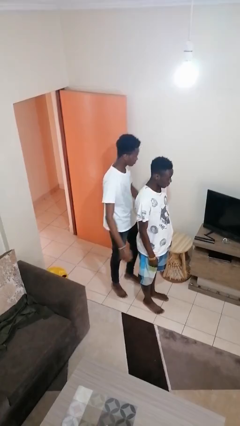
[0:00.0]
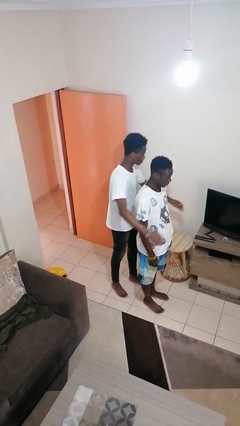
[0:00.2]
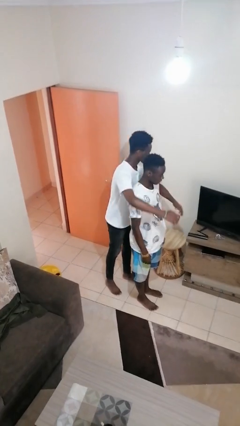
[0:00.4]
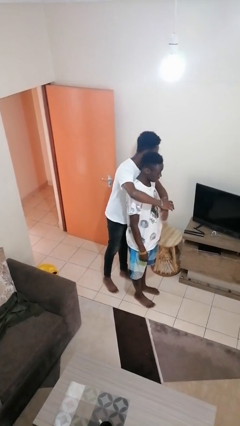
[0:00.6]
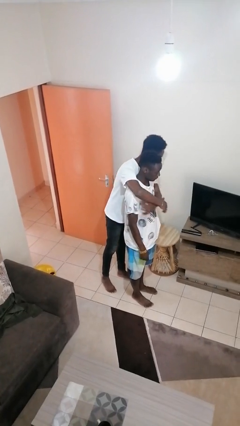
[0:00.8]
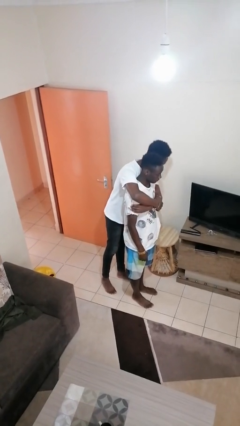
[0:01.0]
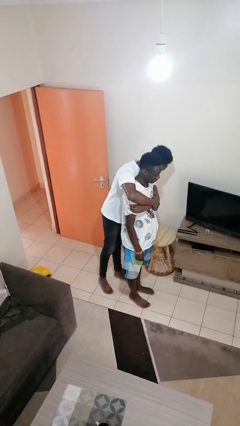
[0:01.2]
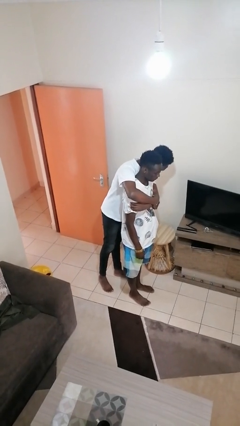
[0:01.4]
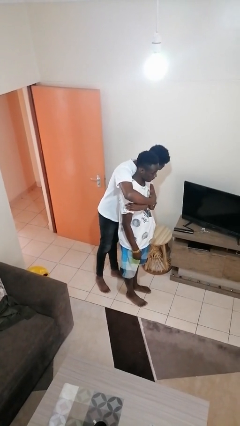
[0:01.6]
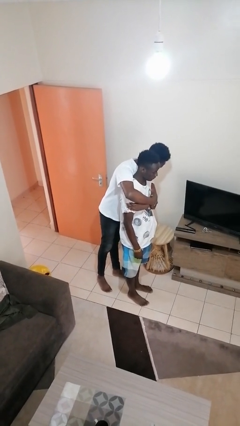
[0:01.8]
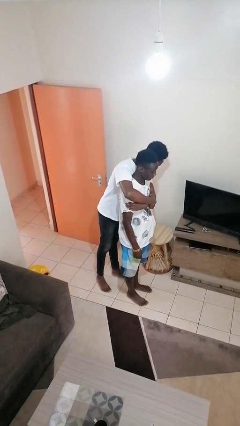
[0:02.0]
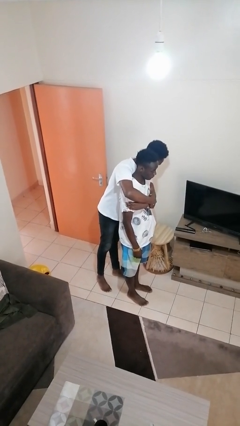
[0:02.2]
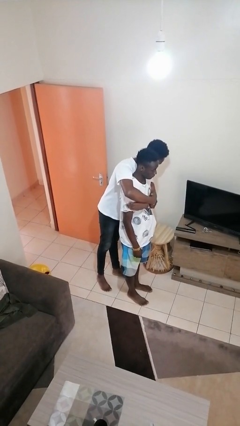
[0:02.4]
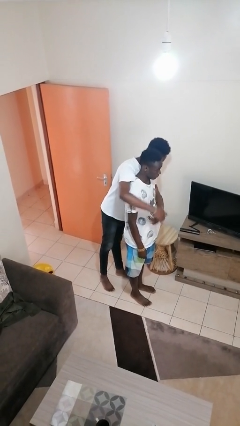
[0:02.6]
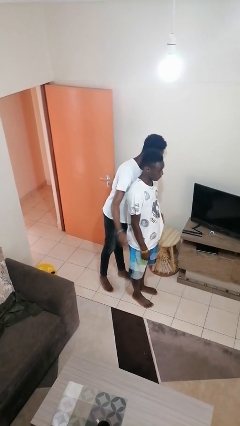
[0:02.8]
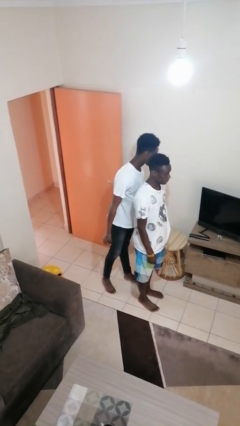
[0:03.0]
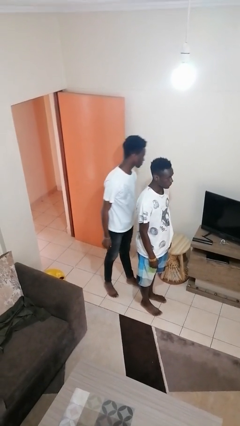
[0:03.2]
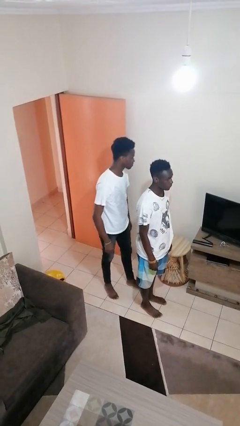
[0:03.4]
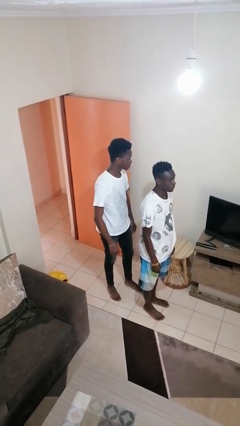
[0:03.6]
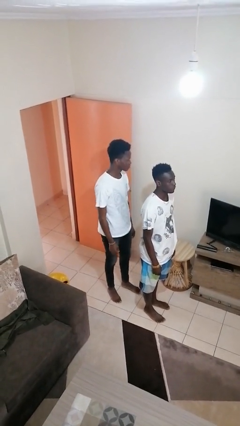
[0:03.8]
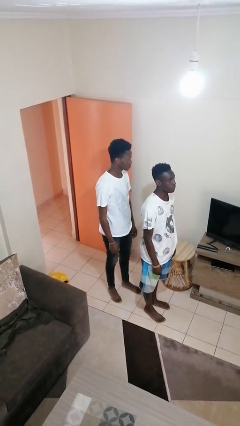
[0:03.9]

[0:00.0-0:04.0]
person hugs person from behind

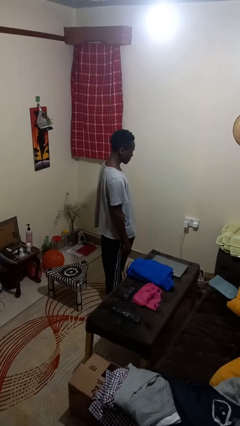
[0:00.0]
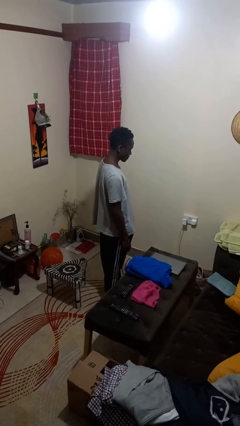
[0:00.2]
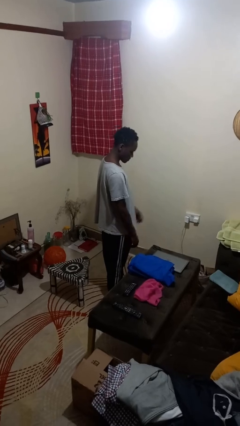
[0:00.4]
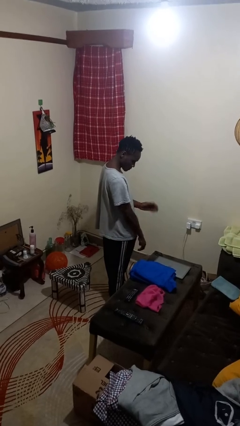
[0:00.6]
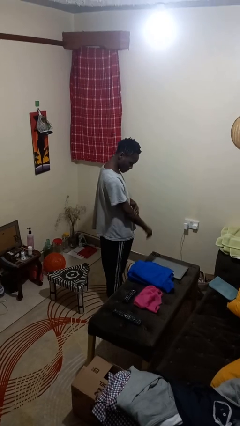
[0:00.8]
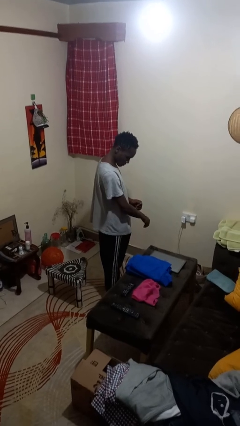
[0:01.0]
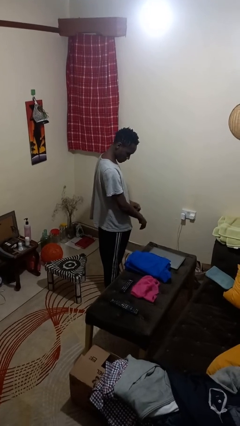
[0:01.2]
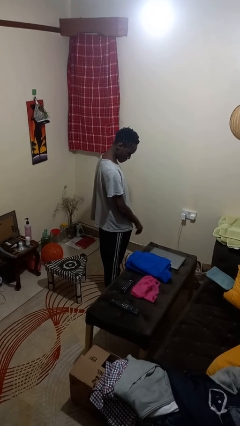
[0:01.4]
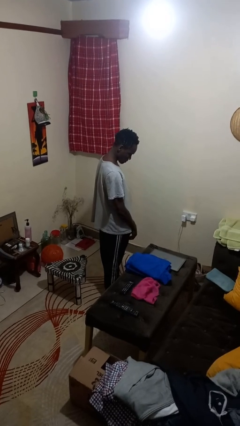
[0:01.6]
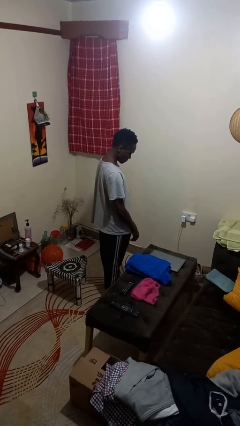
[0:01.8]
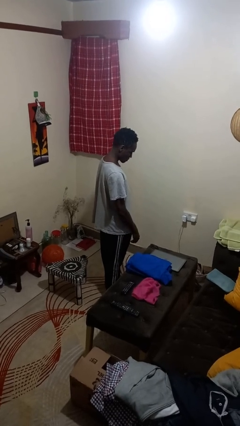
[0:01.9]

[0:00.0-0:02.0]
person swats bug

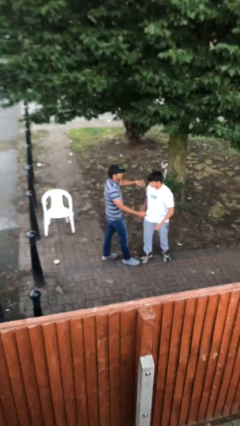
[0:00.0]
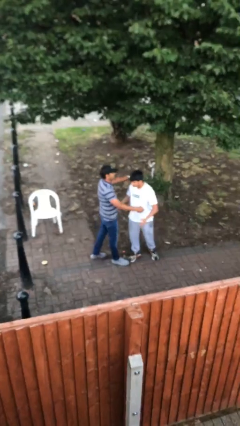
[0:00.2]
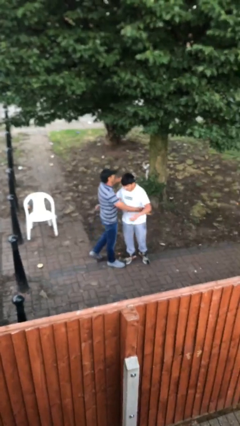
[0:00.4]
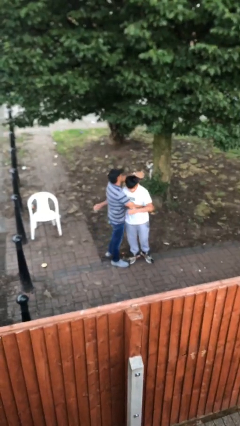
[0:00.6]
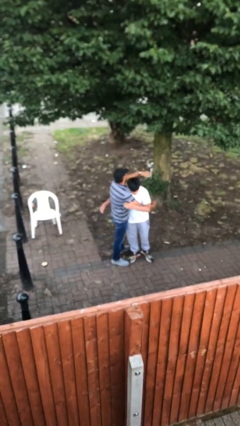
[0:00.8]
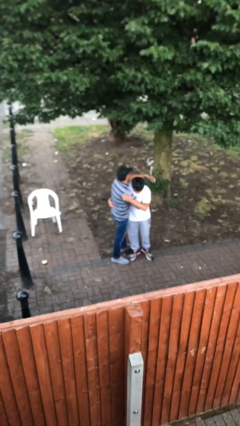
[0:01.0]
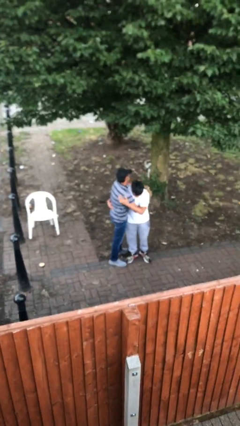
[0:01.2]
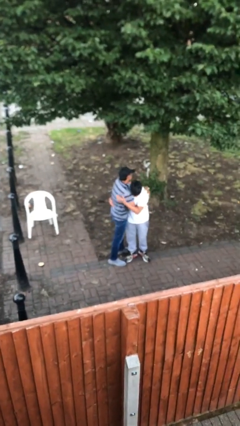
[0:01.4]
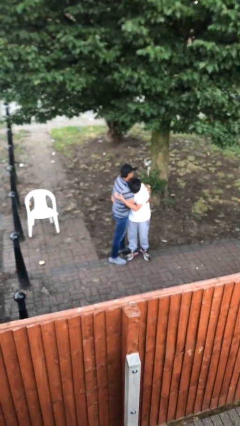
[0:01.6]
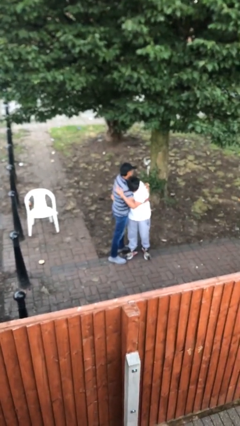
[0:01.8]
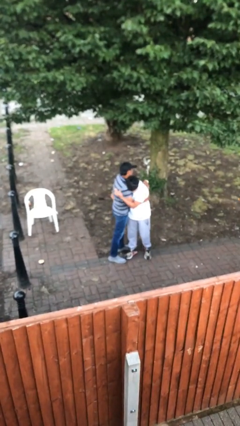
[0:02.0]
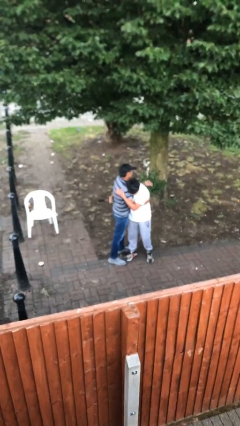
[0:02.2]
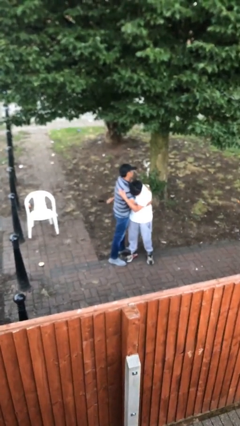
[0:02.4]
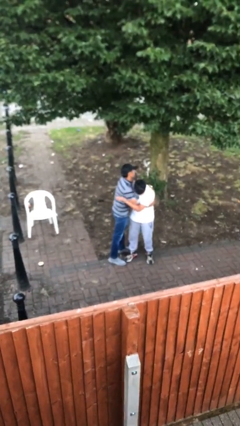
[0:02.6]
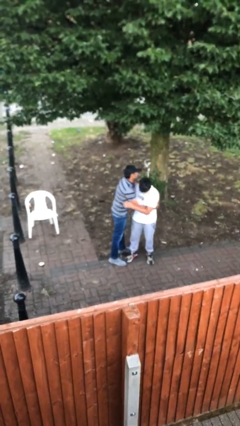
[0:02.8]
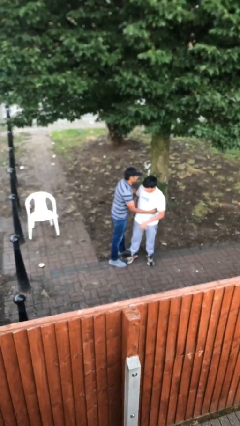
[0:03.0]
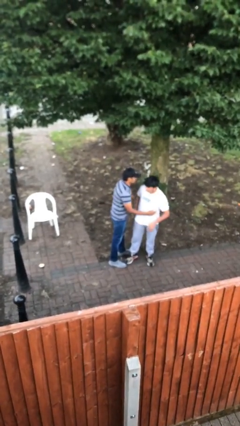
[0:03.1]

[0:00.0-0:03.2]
person embraces person

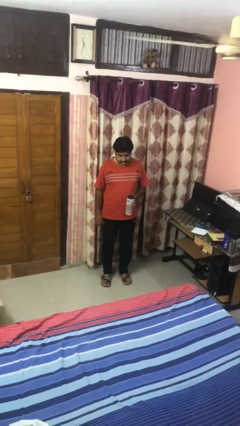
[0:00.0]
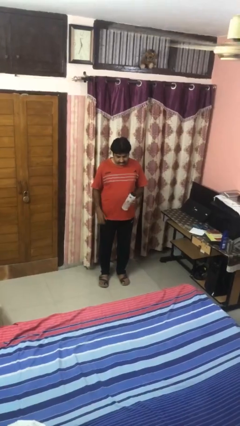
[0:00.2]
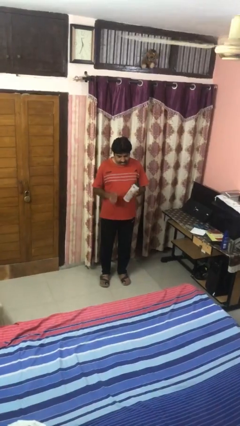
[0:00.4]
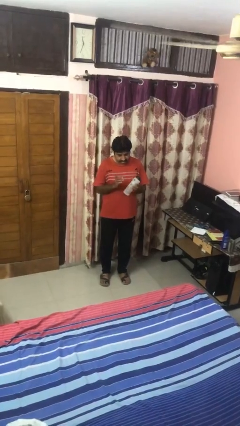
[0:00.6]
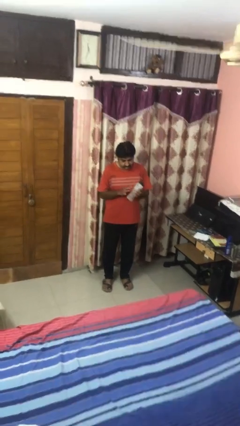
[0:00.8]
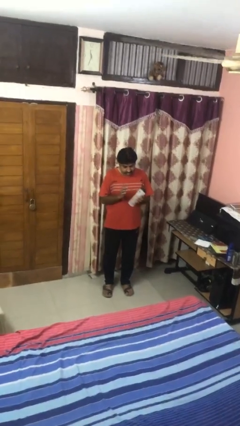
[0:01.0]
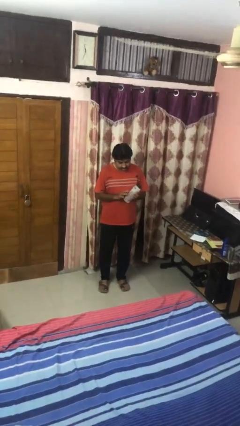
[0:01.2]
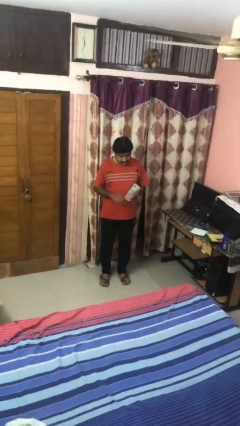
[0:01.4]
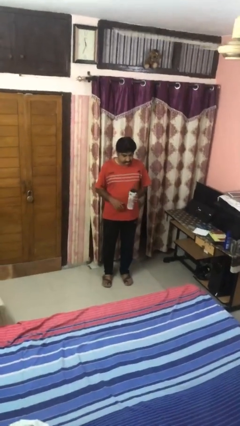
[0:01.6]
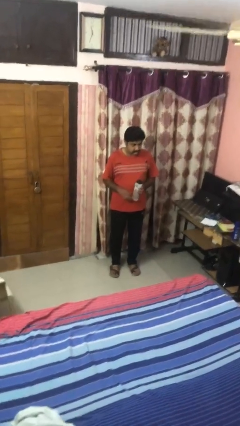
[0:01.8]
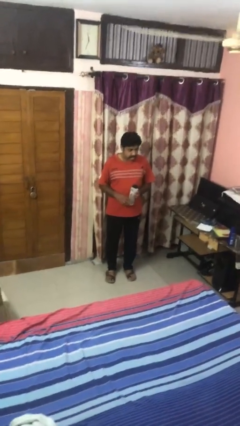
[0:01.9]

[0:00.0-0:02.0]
person taps object with finger

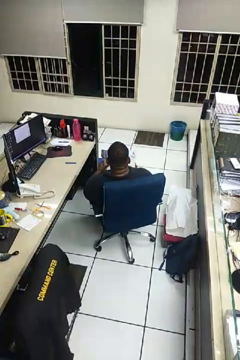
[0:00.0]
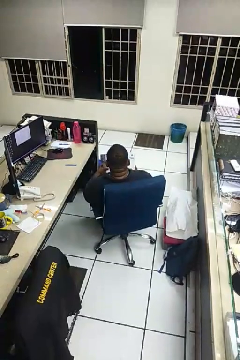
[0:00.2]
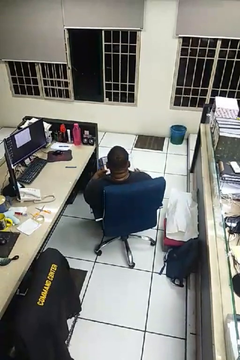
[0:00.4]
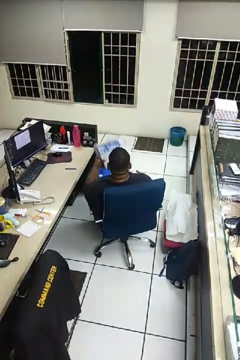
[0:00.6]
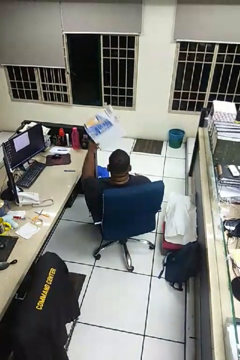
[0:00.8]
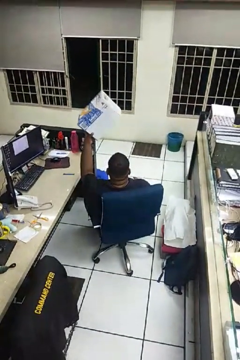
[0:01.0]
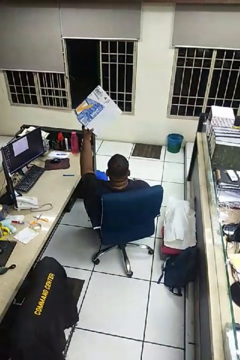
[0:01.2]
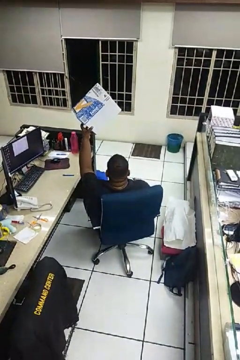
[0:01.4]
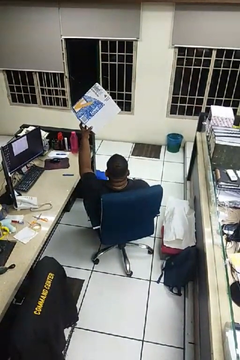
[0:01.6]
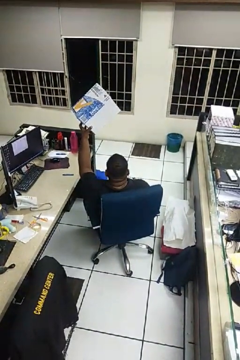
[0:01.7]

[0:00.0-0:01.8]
person holds object above head

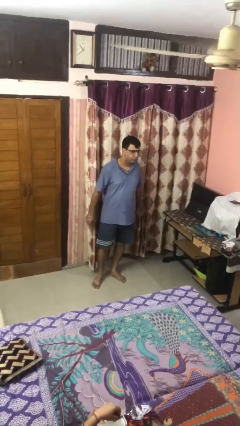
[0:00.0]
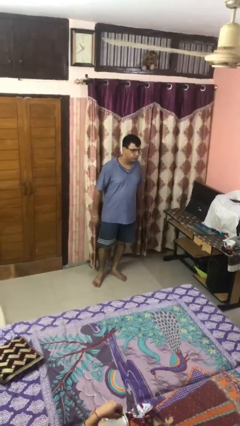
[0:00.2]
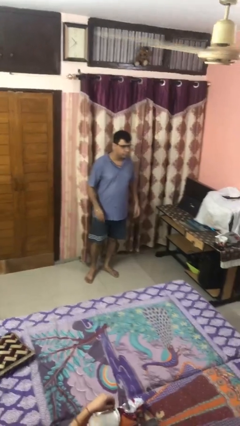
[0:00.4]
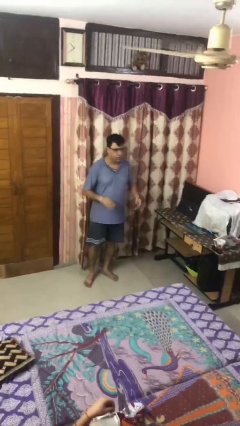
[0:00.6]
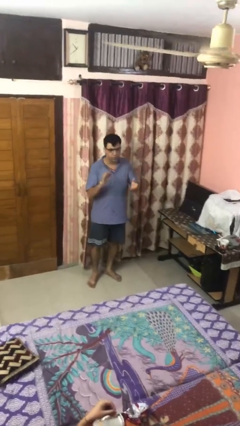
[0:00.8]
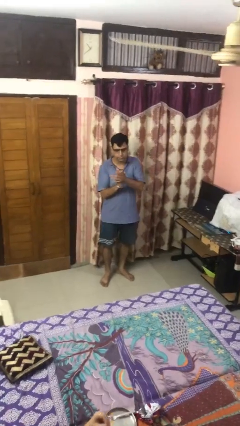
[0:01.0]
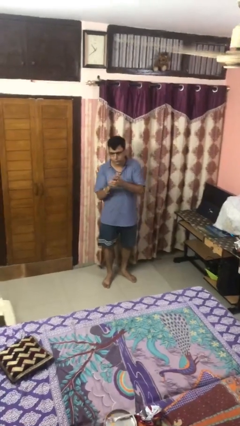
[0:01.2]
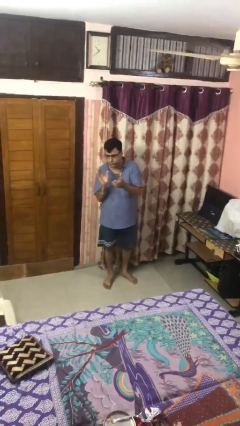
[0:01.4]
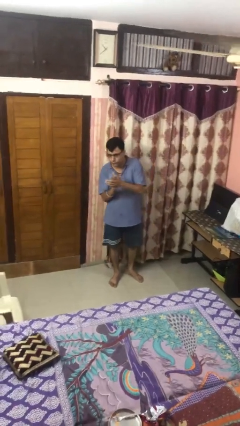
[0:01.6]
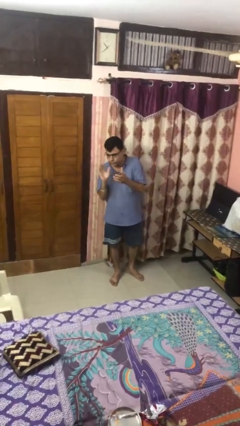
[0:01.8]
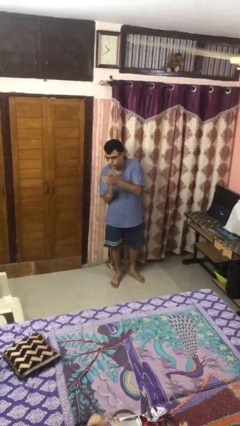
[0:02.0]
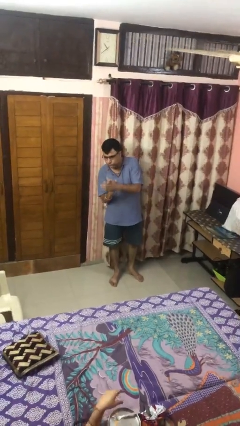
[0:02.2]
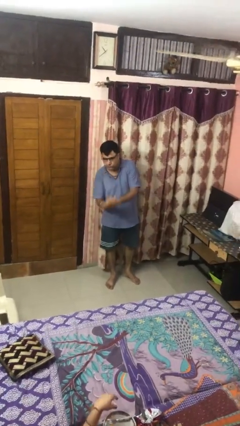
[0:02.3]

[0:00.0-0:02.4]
person claps hands

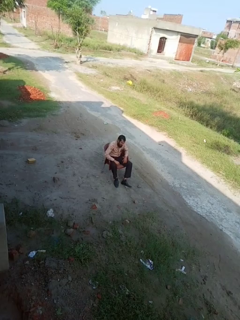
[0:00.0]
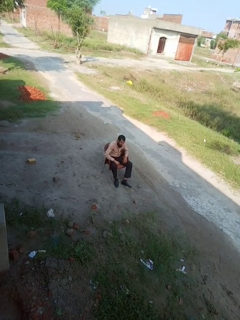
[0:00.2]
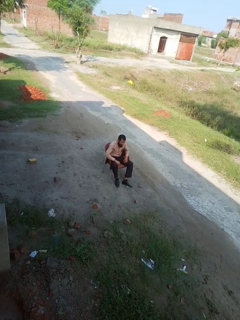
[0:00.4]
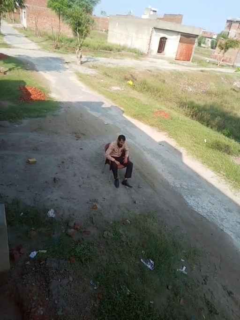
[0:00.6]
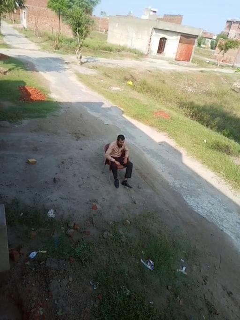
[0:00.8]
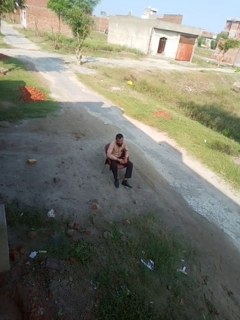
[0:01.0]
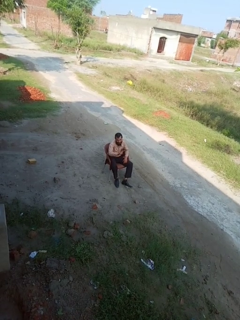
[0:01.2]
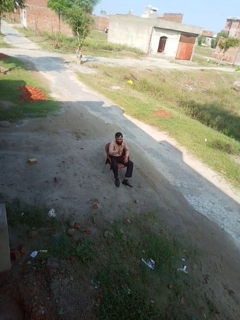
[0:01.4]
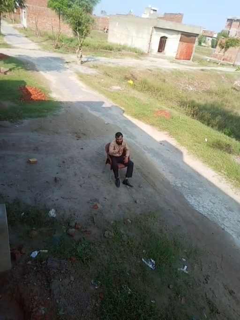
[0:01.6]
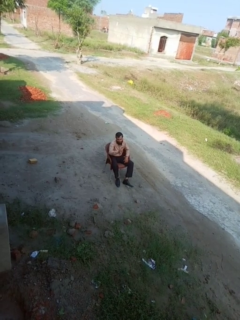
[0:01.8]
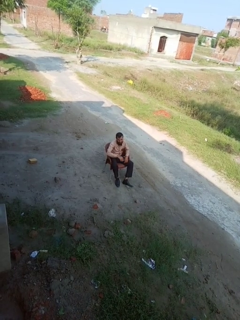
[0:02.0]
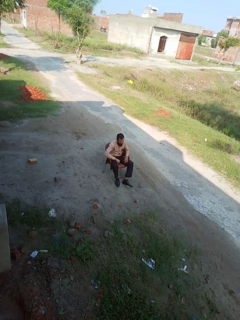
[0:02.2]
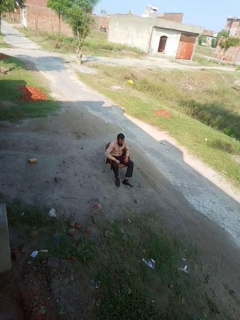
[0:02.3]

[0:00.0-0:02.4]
person gestures number four
